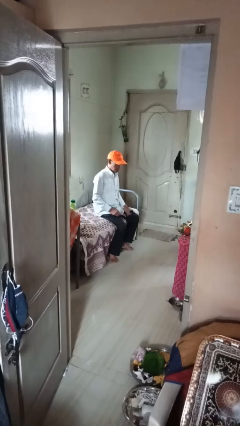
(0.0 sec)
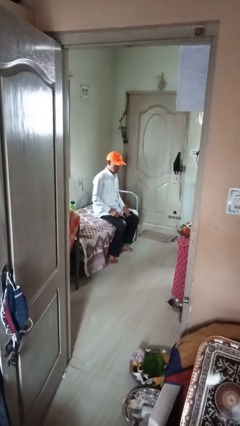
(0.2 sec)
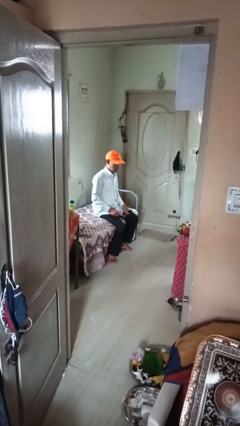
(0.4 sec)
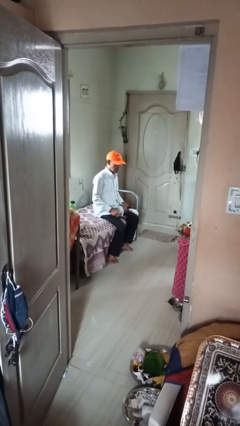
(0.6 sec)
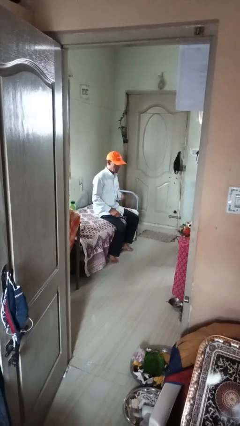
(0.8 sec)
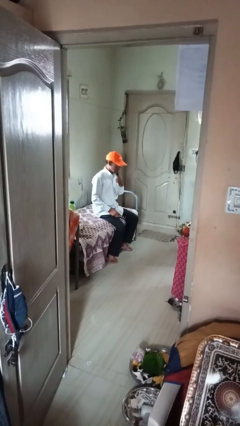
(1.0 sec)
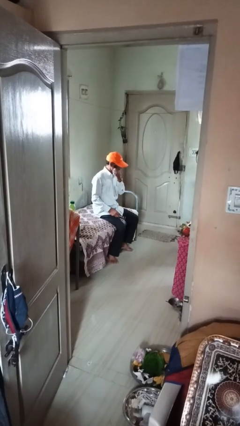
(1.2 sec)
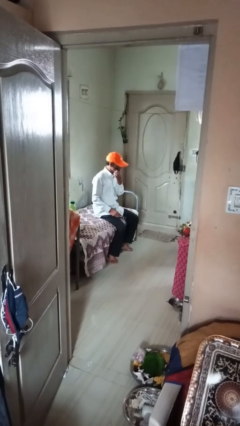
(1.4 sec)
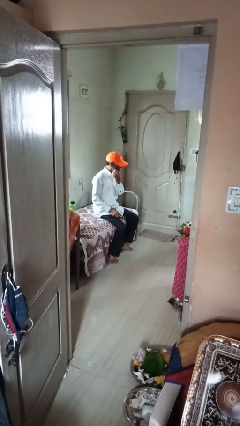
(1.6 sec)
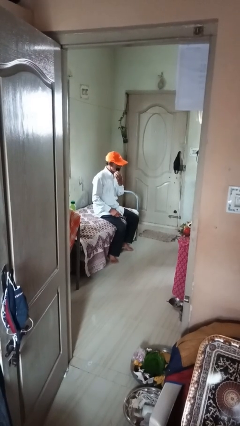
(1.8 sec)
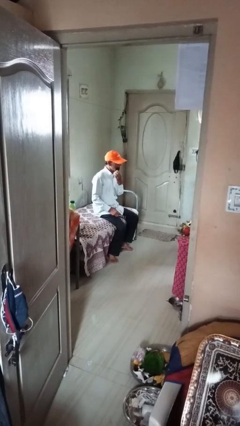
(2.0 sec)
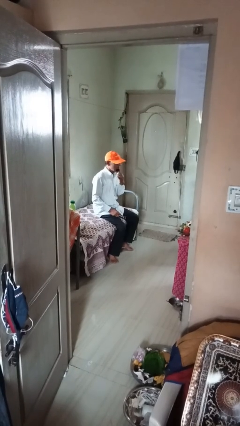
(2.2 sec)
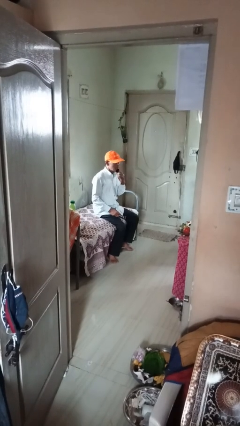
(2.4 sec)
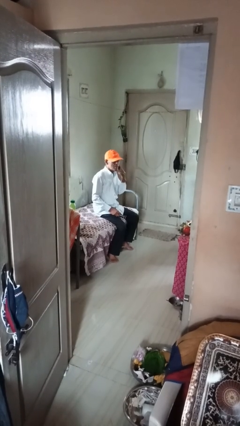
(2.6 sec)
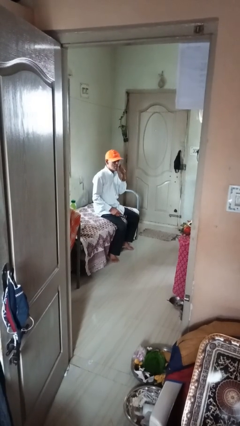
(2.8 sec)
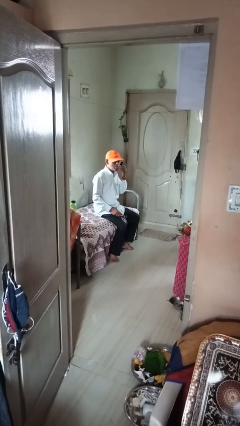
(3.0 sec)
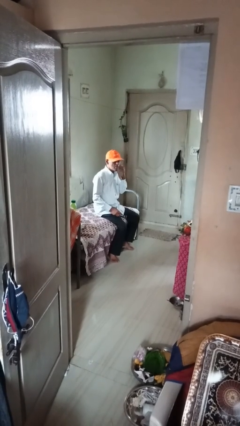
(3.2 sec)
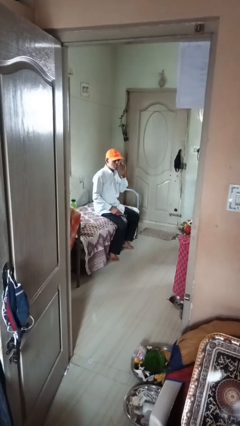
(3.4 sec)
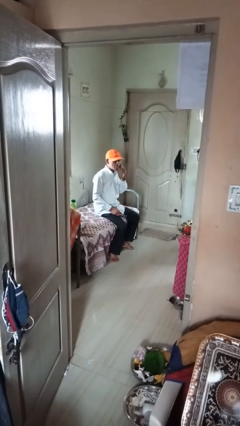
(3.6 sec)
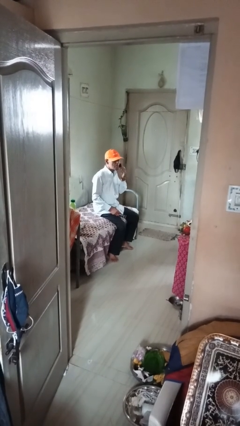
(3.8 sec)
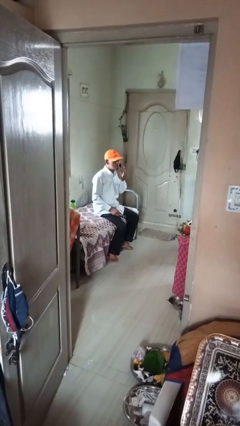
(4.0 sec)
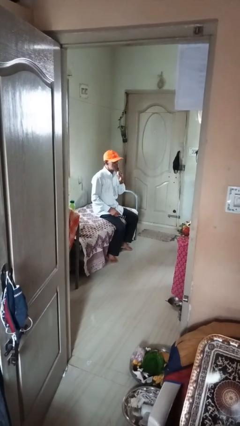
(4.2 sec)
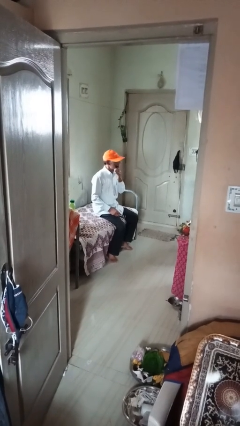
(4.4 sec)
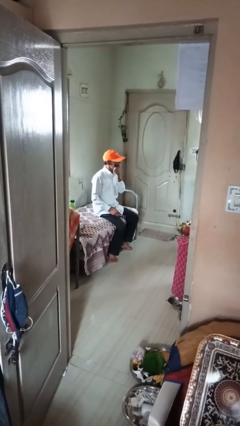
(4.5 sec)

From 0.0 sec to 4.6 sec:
person applies shaving cream

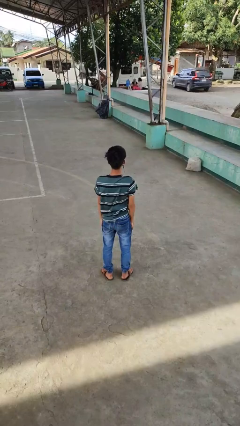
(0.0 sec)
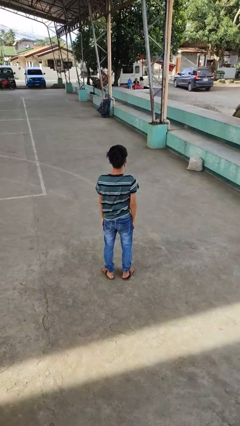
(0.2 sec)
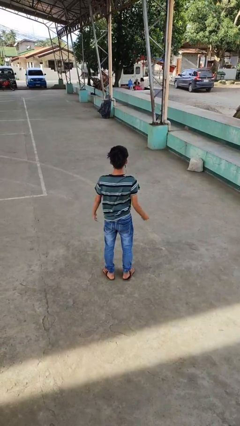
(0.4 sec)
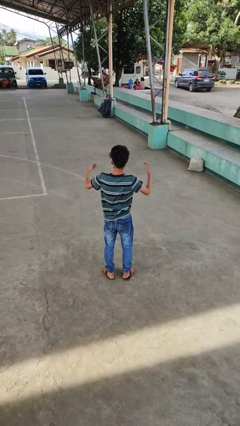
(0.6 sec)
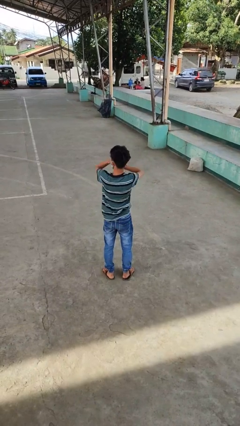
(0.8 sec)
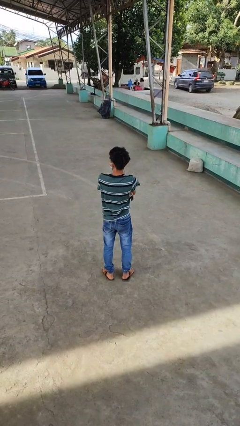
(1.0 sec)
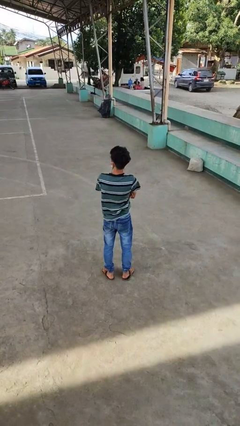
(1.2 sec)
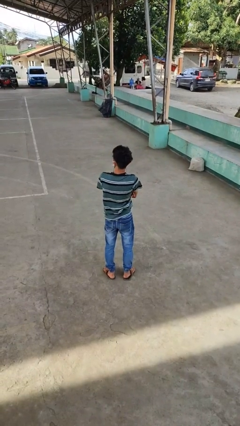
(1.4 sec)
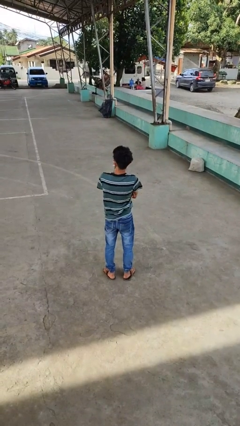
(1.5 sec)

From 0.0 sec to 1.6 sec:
person crosses arms

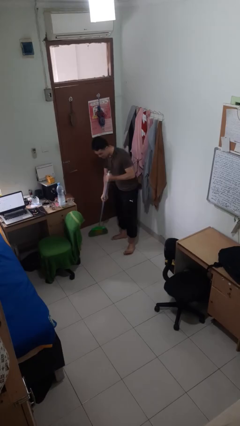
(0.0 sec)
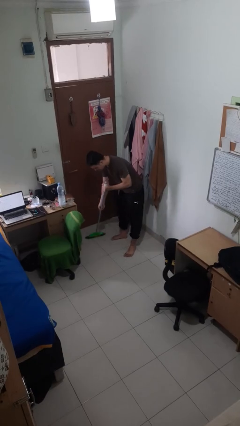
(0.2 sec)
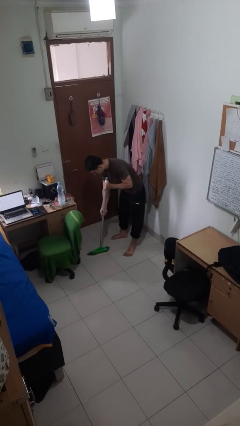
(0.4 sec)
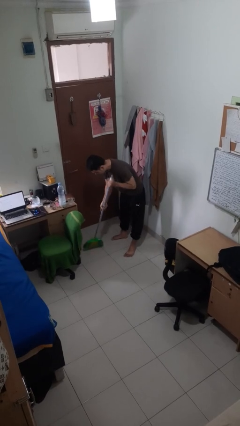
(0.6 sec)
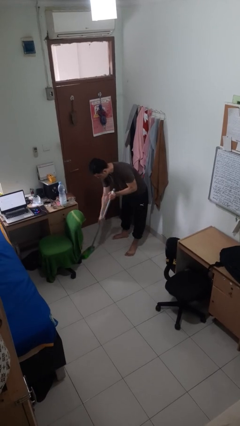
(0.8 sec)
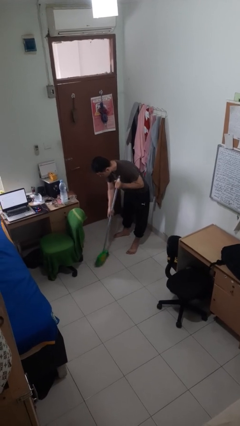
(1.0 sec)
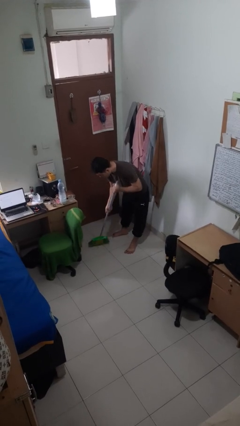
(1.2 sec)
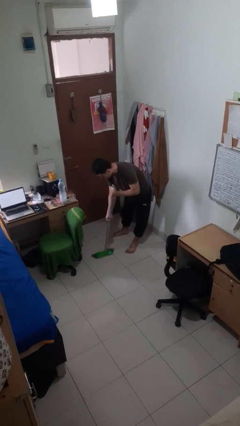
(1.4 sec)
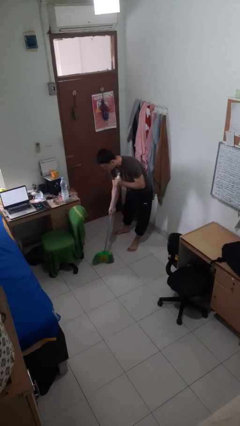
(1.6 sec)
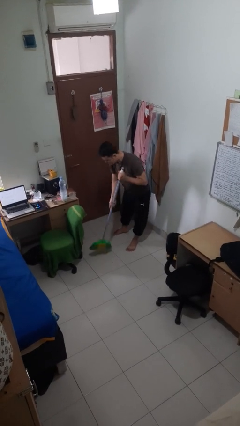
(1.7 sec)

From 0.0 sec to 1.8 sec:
person sweeps floor

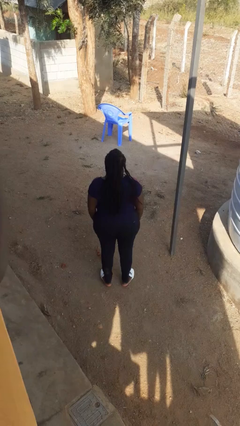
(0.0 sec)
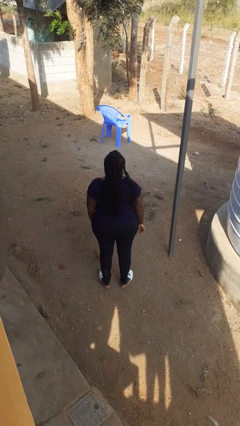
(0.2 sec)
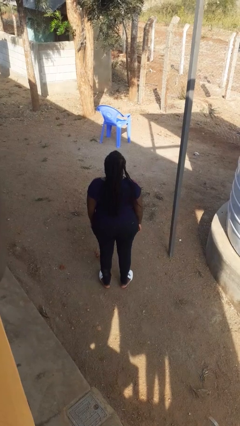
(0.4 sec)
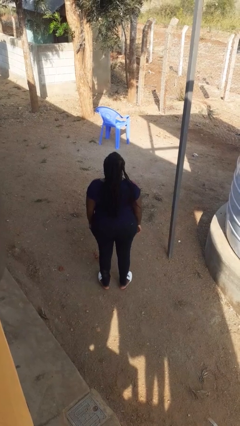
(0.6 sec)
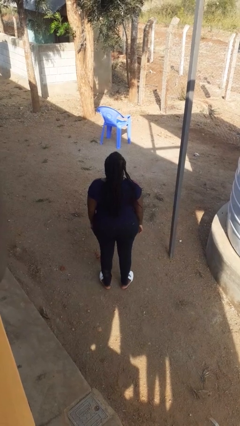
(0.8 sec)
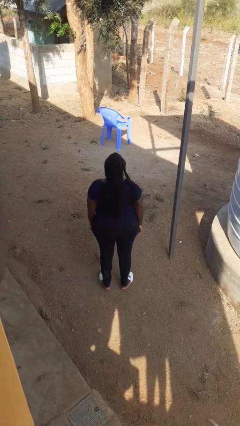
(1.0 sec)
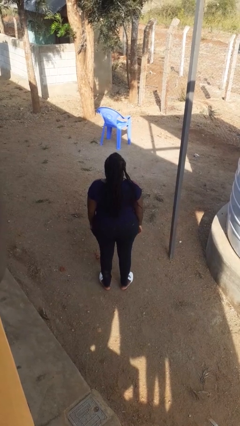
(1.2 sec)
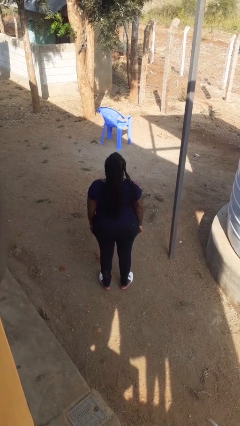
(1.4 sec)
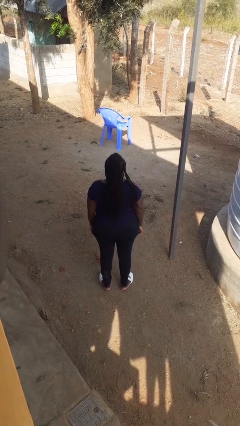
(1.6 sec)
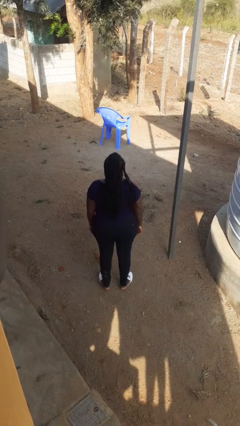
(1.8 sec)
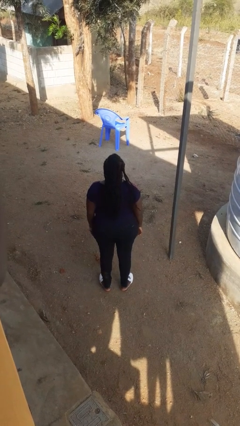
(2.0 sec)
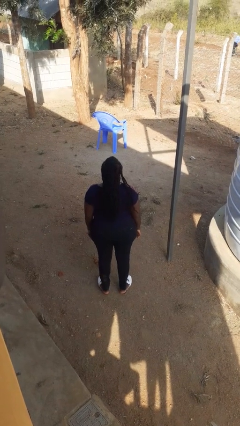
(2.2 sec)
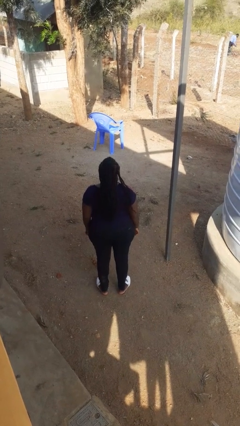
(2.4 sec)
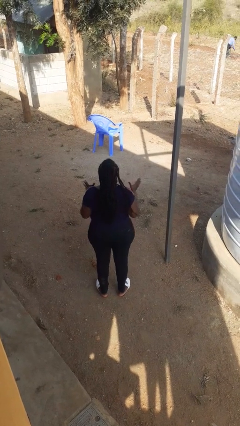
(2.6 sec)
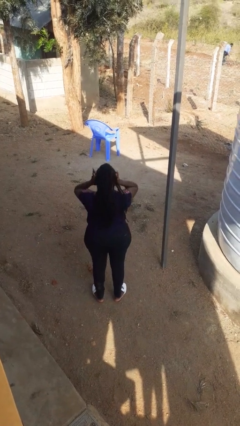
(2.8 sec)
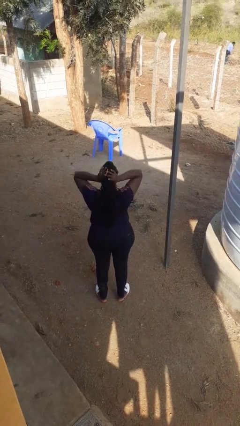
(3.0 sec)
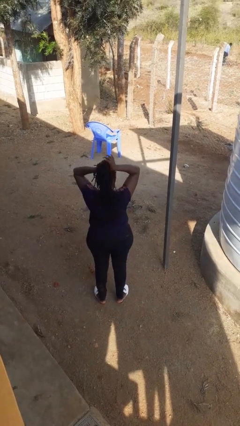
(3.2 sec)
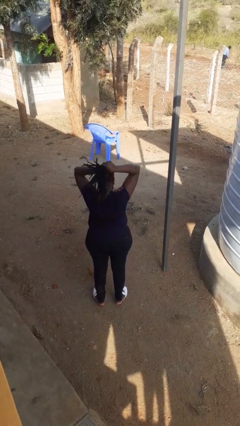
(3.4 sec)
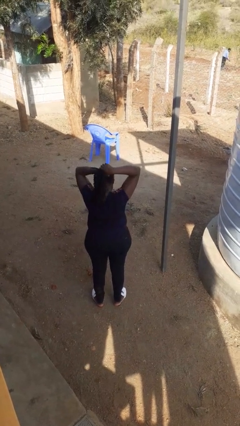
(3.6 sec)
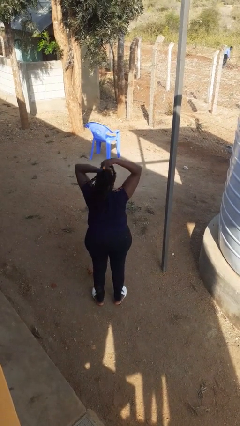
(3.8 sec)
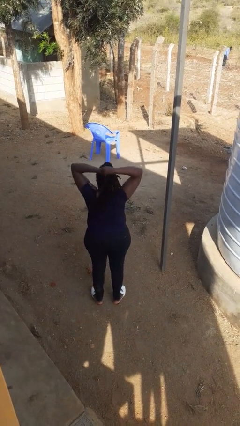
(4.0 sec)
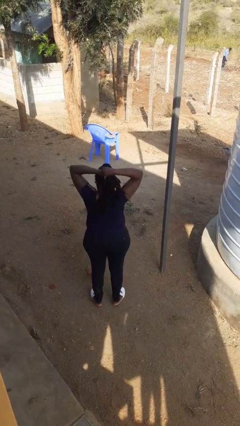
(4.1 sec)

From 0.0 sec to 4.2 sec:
person puts hair in ponytail

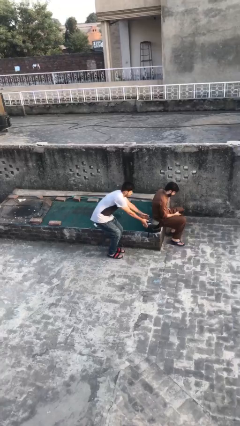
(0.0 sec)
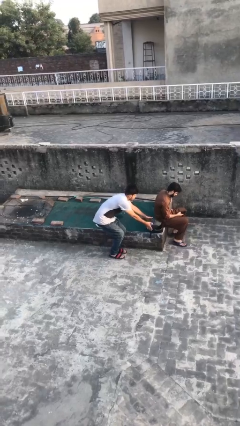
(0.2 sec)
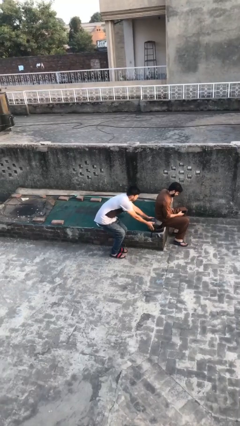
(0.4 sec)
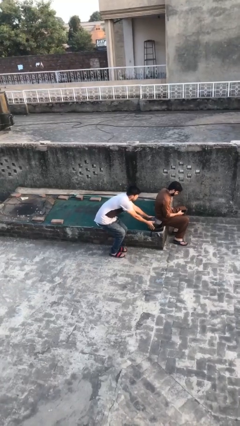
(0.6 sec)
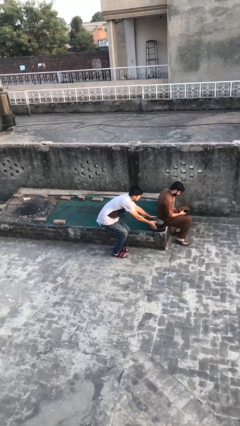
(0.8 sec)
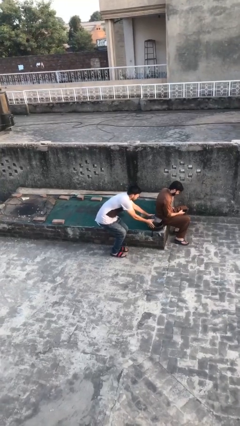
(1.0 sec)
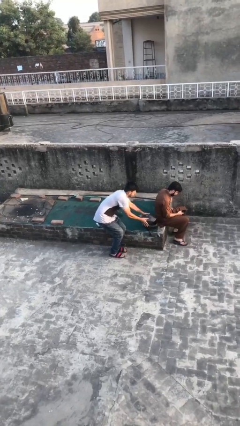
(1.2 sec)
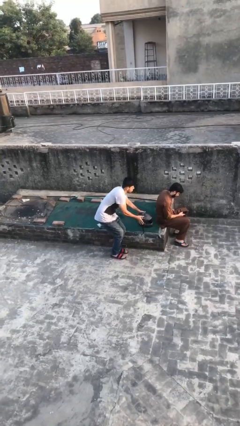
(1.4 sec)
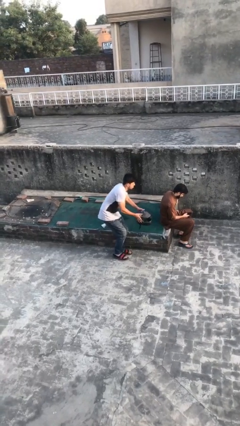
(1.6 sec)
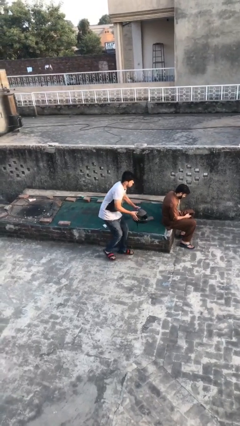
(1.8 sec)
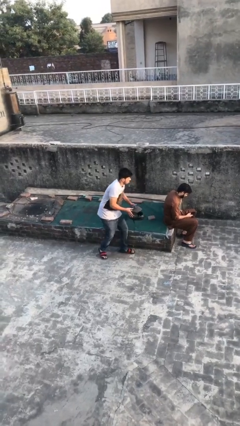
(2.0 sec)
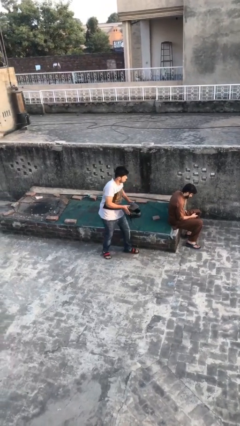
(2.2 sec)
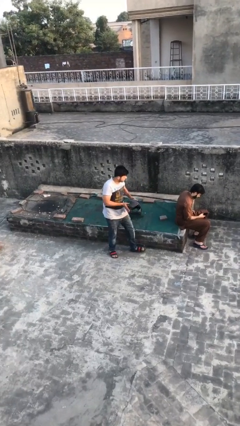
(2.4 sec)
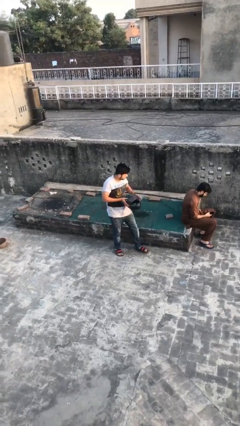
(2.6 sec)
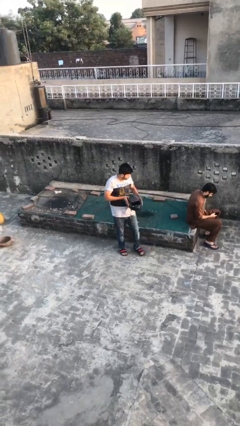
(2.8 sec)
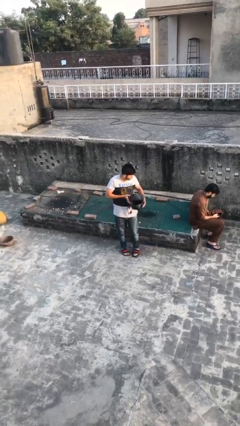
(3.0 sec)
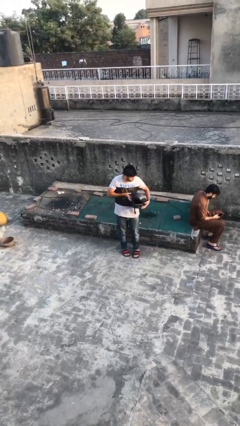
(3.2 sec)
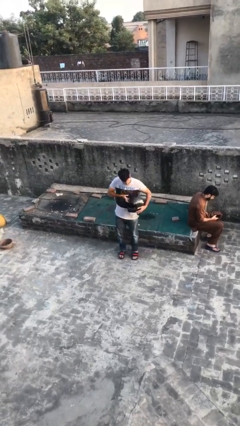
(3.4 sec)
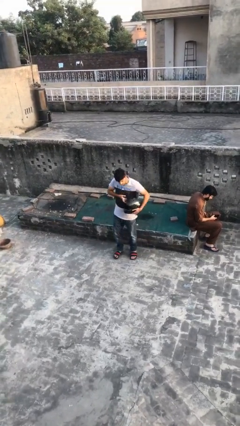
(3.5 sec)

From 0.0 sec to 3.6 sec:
person steals object from person

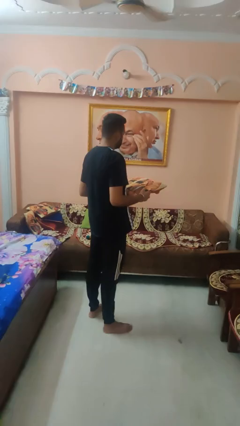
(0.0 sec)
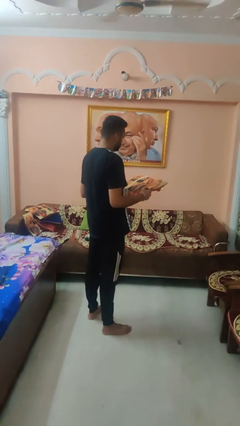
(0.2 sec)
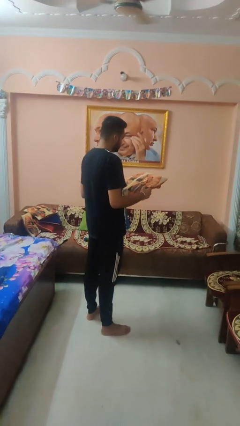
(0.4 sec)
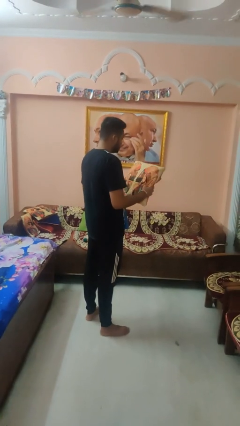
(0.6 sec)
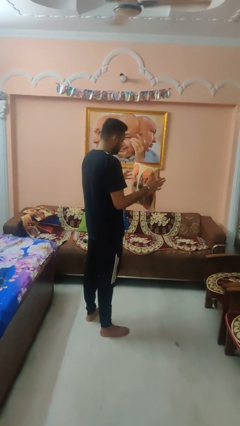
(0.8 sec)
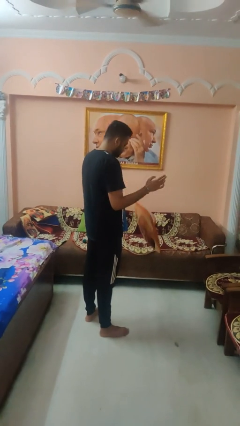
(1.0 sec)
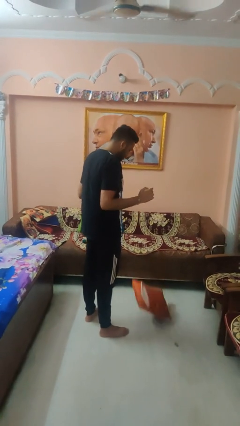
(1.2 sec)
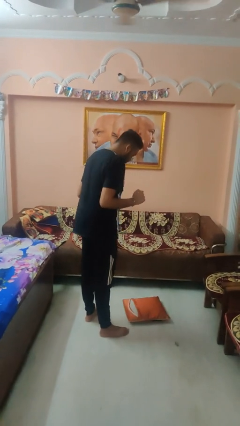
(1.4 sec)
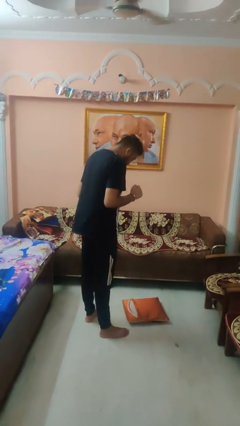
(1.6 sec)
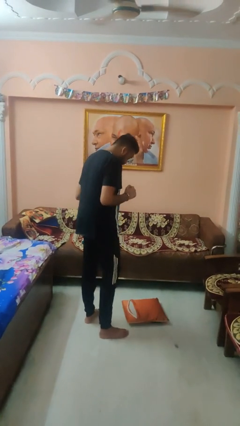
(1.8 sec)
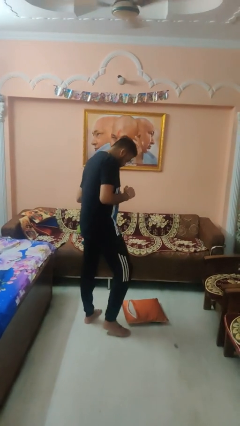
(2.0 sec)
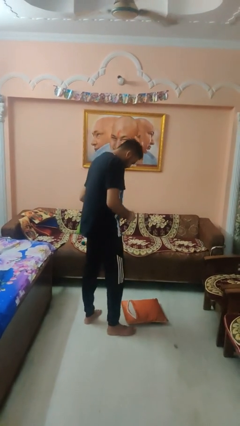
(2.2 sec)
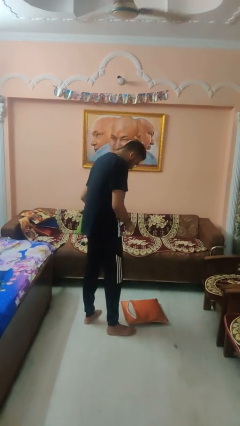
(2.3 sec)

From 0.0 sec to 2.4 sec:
person drops object
